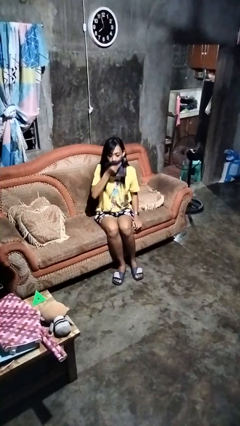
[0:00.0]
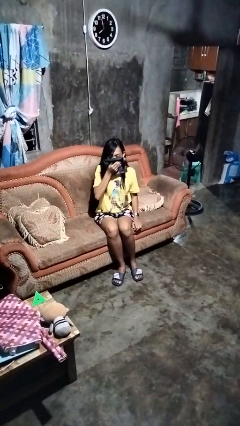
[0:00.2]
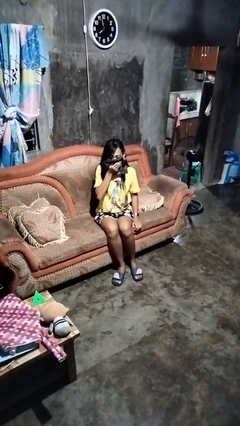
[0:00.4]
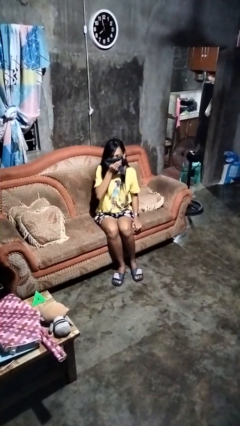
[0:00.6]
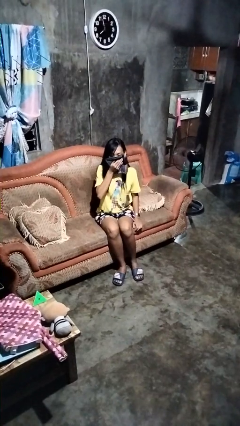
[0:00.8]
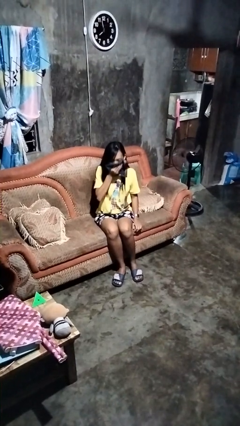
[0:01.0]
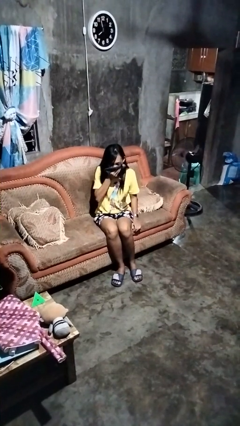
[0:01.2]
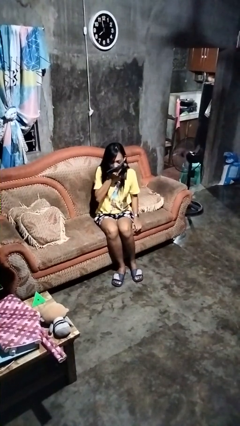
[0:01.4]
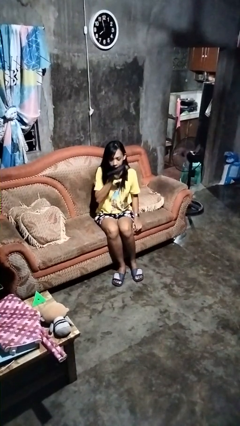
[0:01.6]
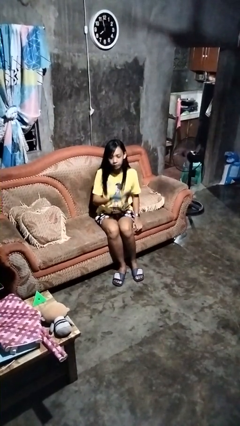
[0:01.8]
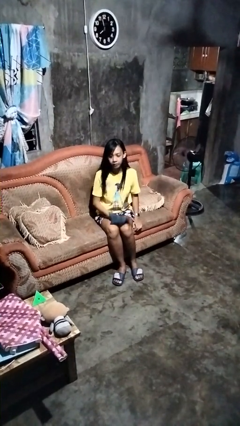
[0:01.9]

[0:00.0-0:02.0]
person blows nose

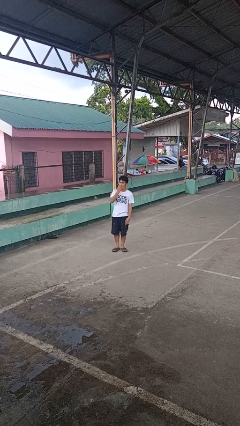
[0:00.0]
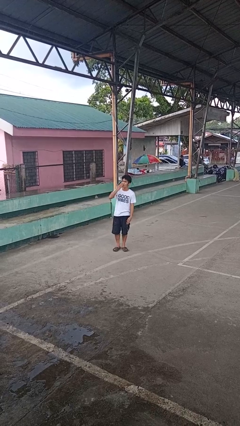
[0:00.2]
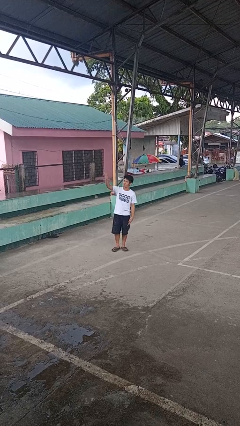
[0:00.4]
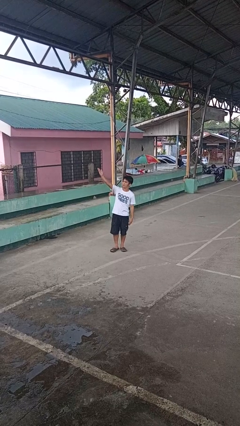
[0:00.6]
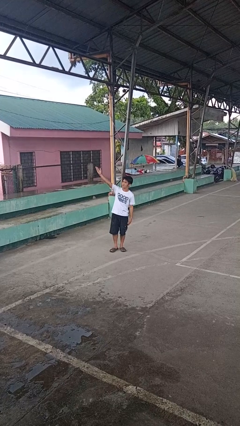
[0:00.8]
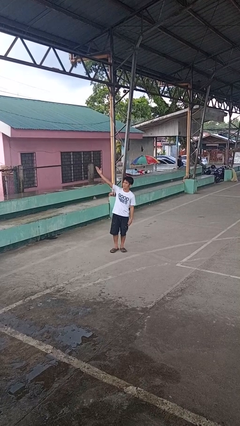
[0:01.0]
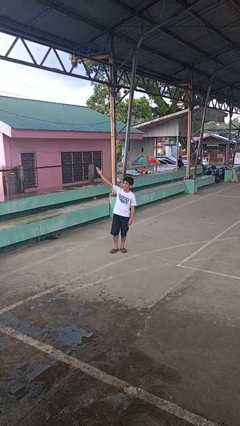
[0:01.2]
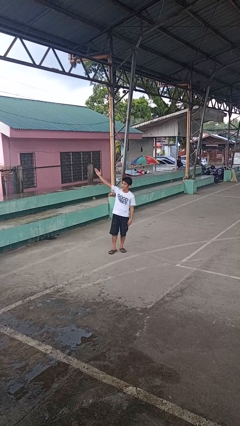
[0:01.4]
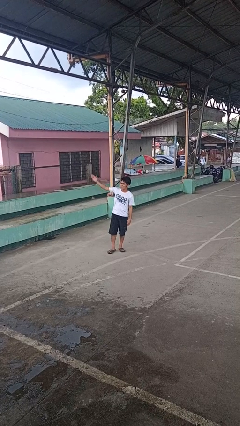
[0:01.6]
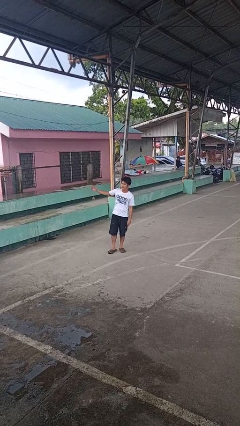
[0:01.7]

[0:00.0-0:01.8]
person gestures blow kiss

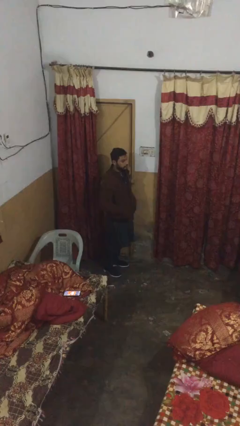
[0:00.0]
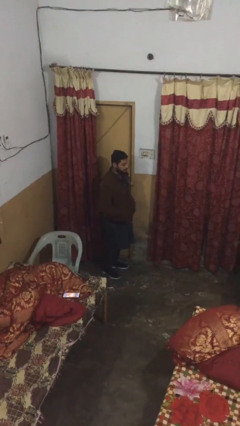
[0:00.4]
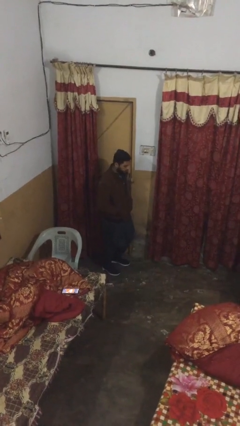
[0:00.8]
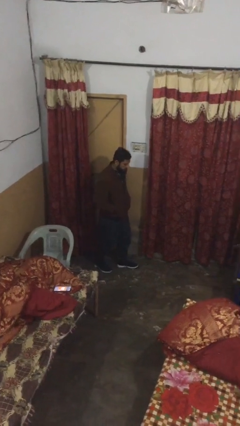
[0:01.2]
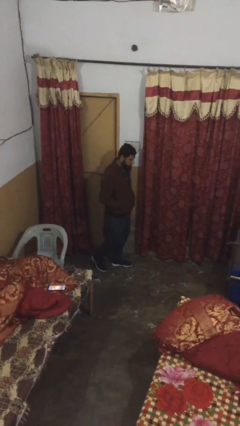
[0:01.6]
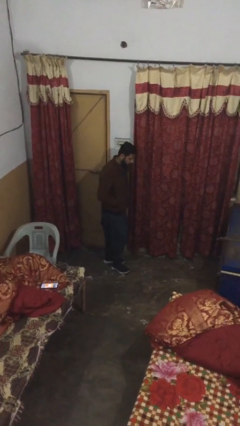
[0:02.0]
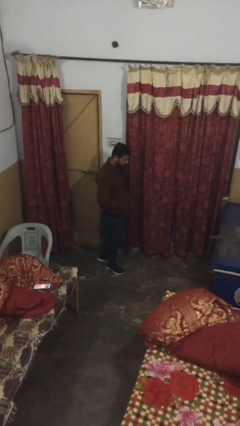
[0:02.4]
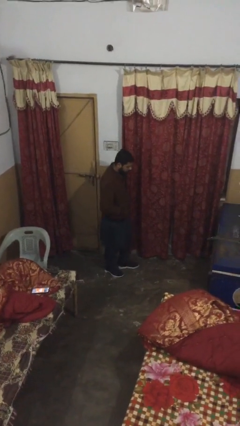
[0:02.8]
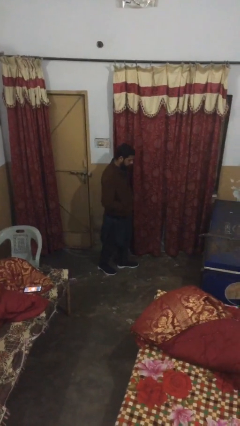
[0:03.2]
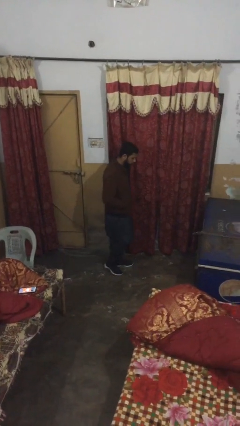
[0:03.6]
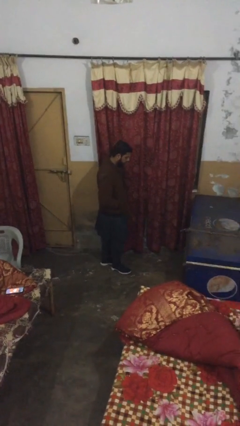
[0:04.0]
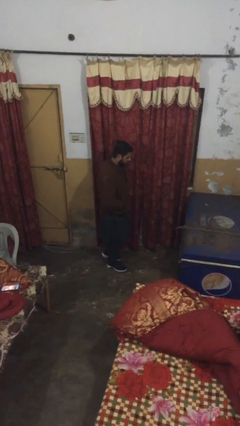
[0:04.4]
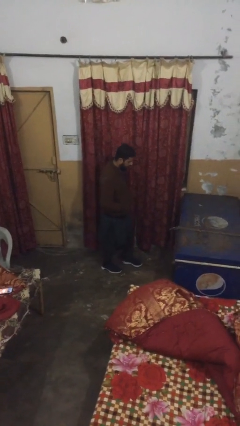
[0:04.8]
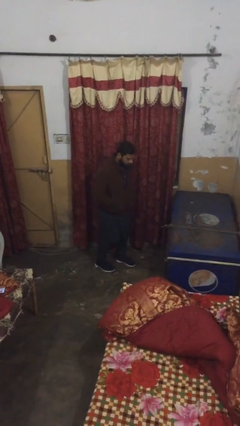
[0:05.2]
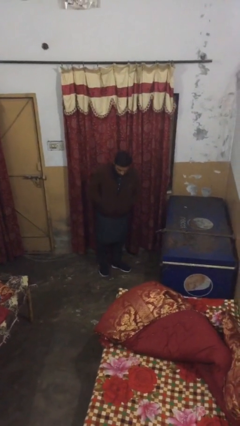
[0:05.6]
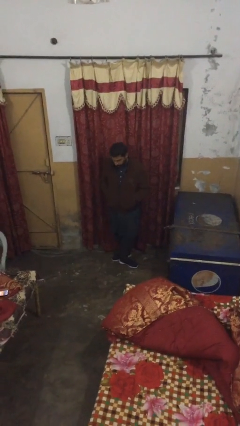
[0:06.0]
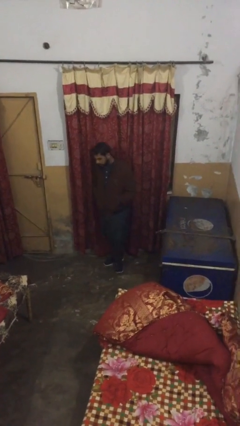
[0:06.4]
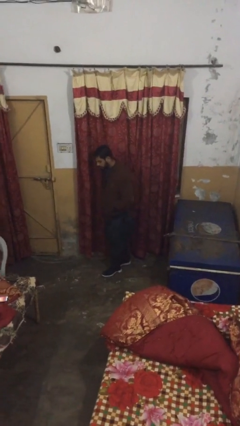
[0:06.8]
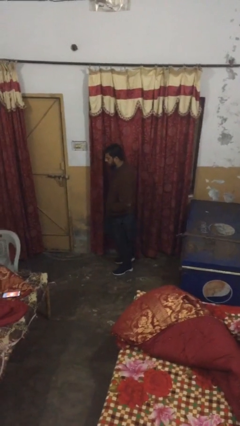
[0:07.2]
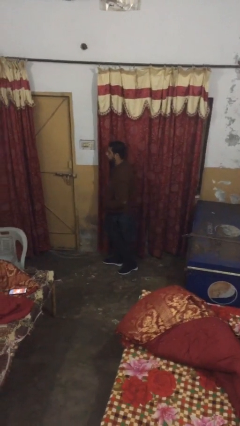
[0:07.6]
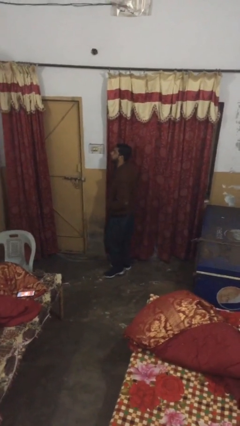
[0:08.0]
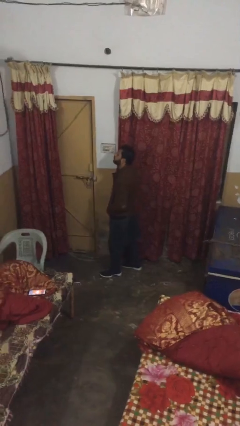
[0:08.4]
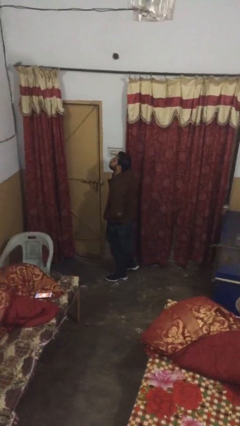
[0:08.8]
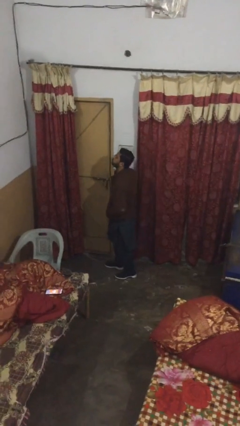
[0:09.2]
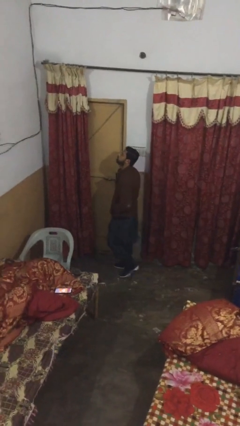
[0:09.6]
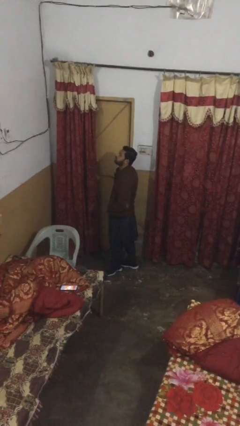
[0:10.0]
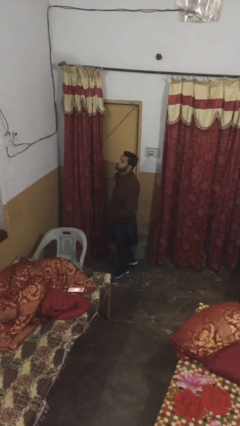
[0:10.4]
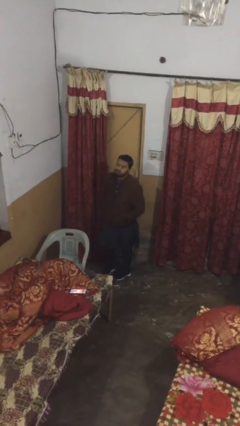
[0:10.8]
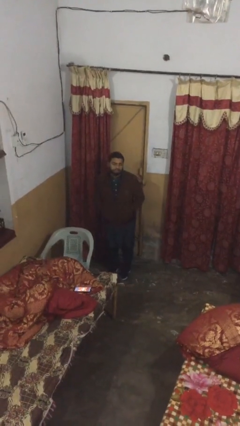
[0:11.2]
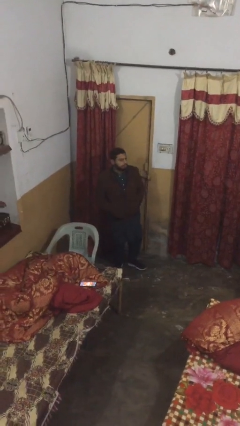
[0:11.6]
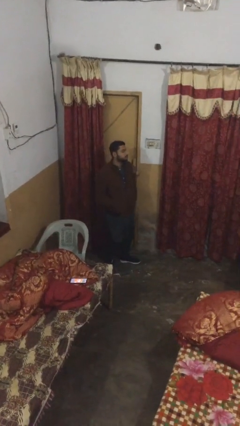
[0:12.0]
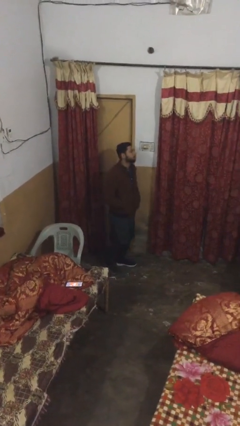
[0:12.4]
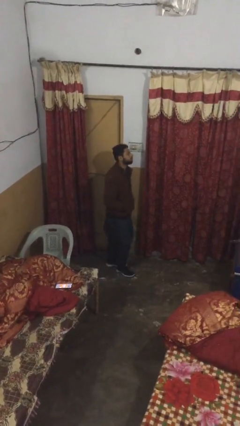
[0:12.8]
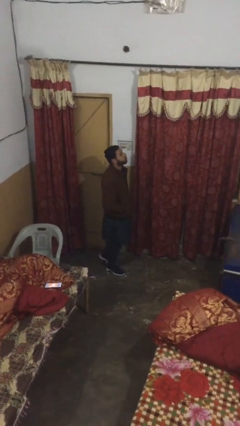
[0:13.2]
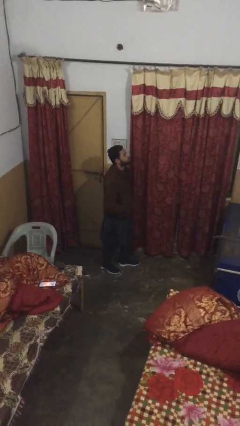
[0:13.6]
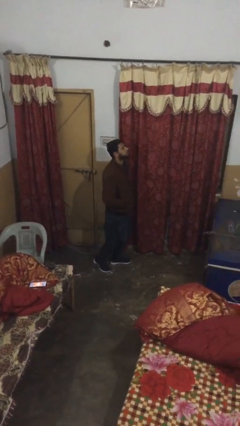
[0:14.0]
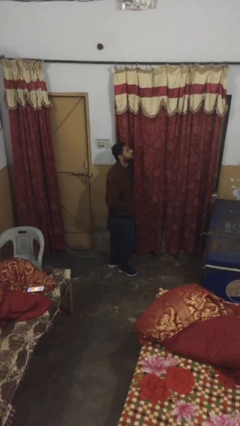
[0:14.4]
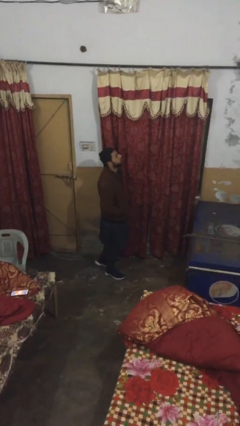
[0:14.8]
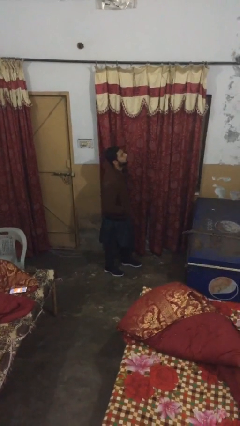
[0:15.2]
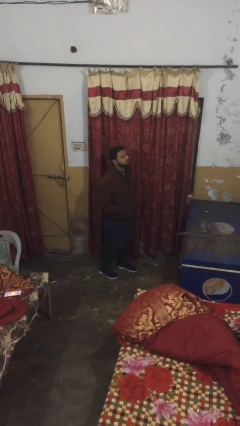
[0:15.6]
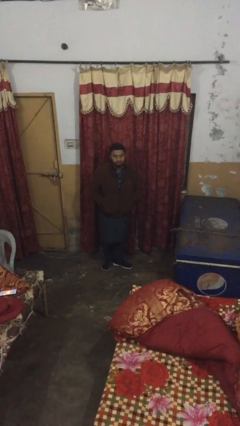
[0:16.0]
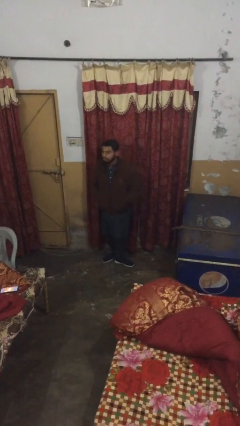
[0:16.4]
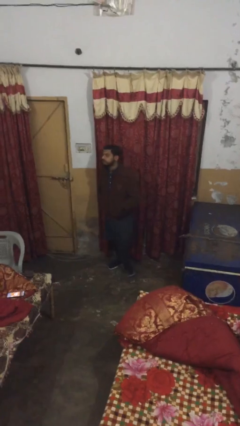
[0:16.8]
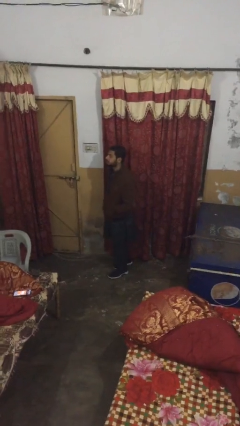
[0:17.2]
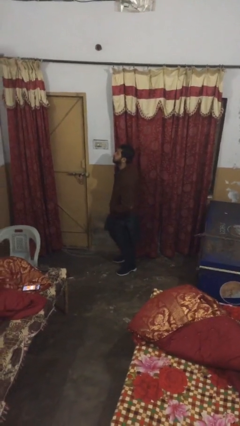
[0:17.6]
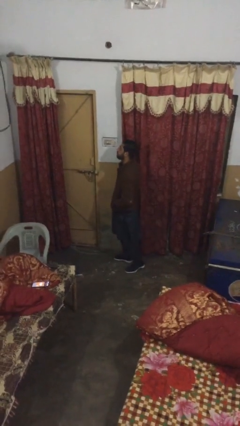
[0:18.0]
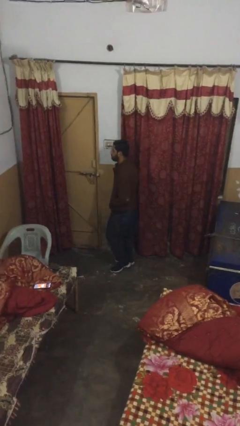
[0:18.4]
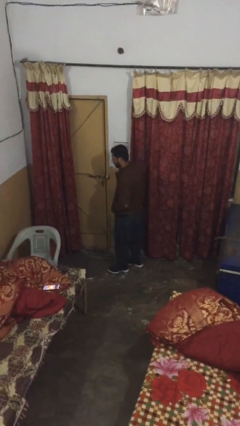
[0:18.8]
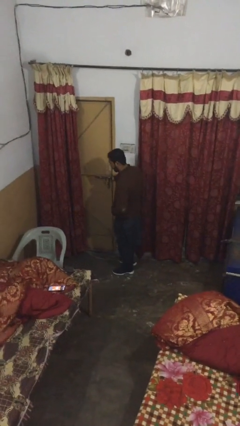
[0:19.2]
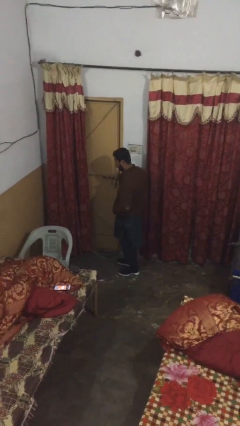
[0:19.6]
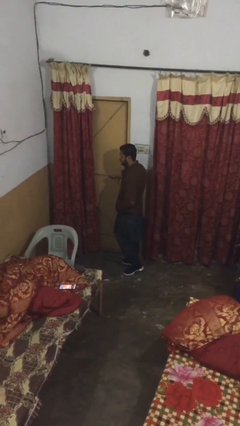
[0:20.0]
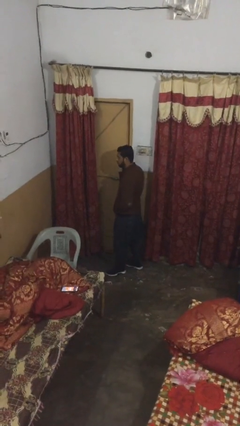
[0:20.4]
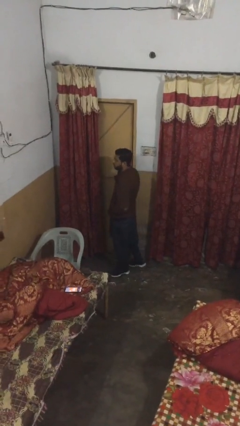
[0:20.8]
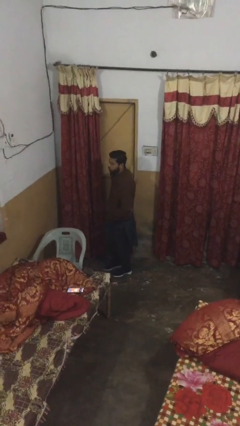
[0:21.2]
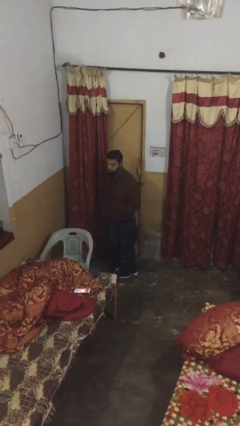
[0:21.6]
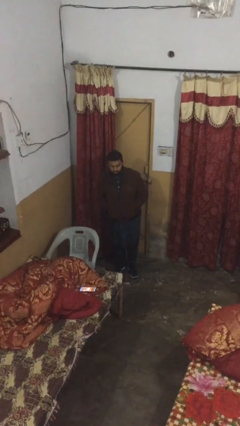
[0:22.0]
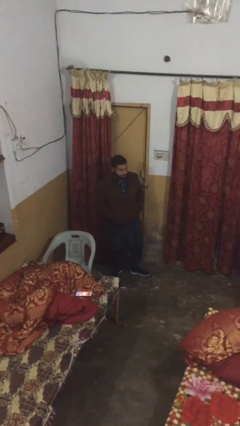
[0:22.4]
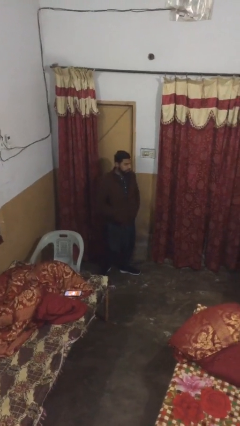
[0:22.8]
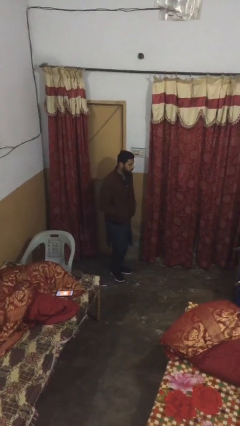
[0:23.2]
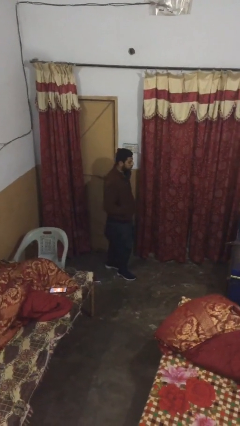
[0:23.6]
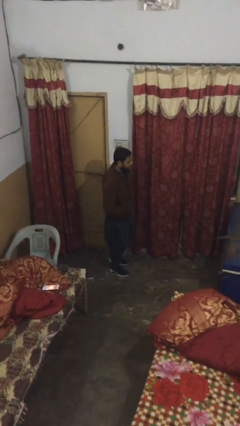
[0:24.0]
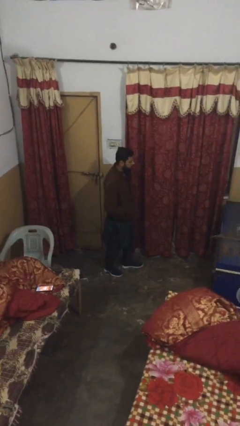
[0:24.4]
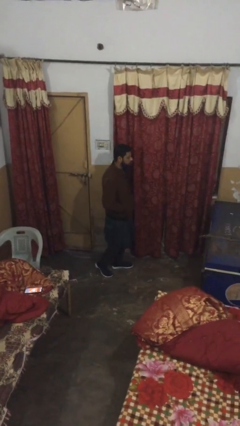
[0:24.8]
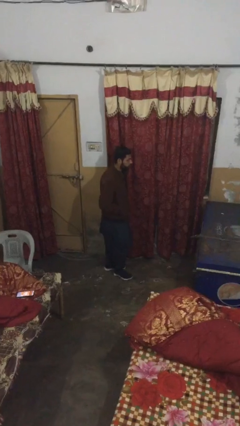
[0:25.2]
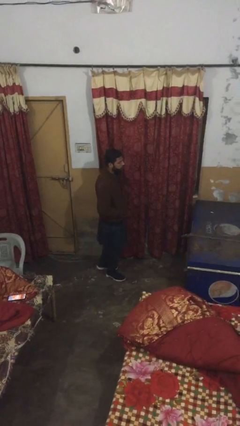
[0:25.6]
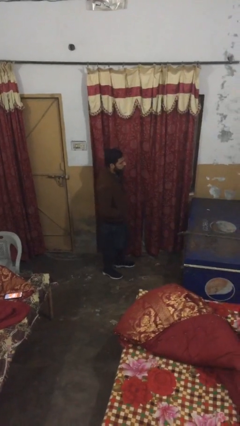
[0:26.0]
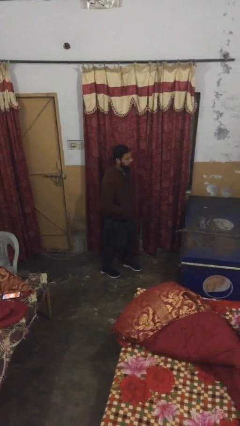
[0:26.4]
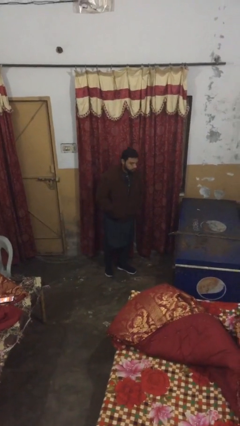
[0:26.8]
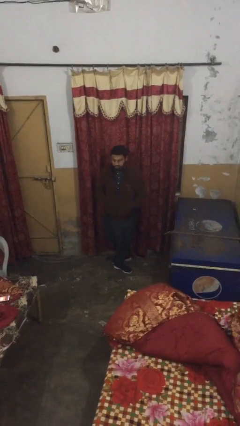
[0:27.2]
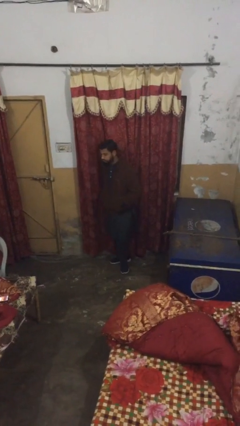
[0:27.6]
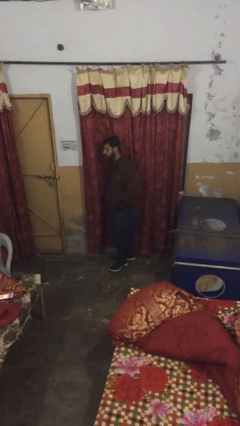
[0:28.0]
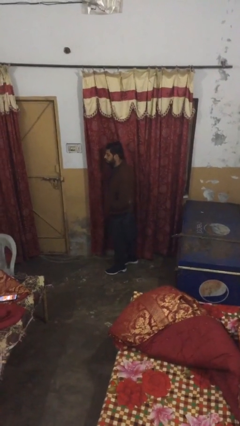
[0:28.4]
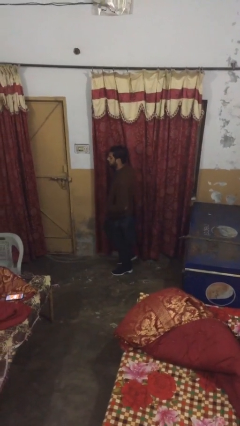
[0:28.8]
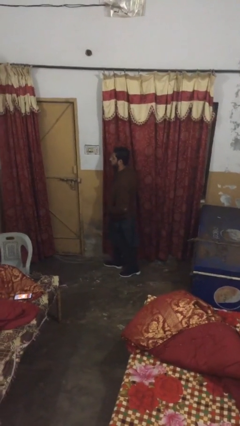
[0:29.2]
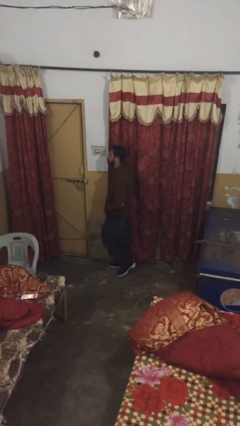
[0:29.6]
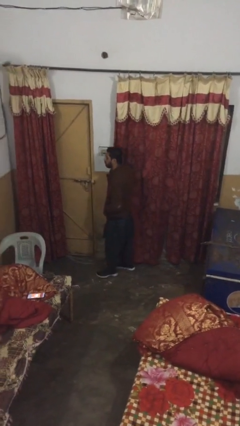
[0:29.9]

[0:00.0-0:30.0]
person walks
